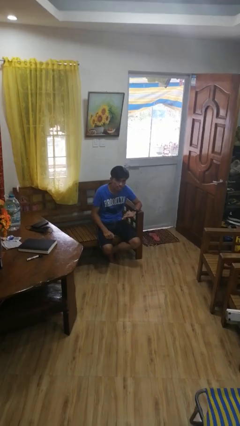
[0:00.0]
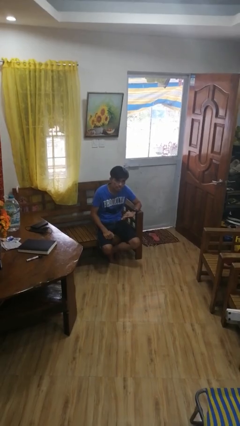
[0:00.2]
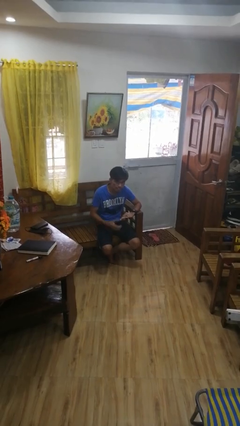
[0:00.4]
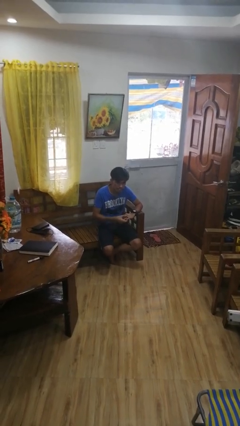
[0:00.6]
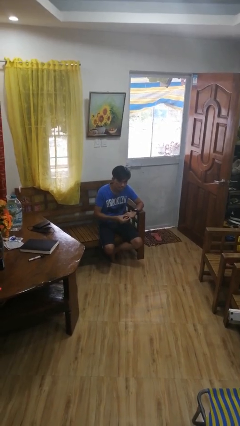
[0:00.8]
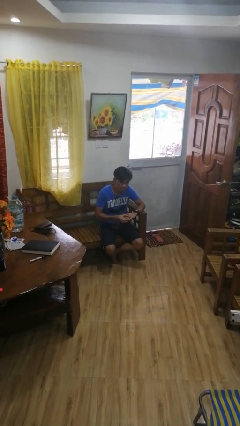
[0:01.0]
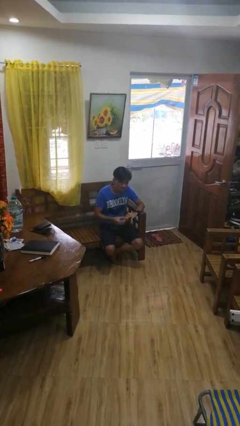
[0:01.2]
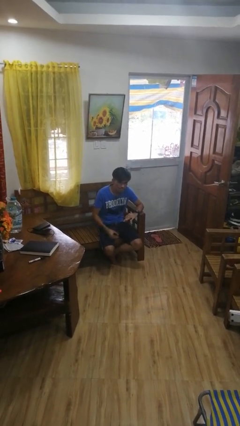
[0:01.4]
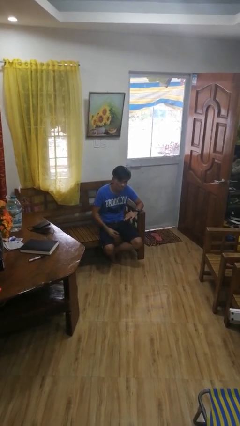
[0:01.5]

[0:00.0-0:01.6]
person takes off ring

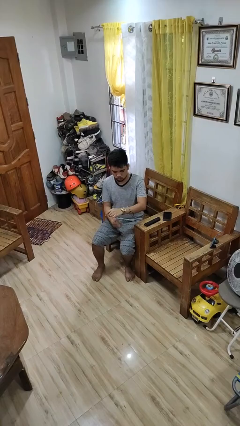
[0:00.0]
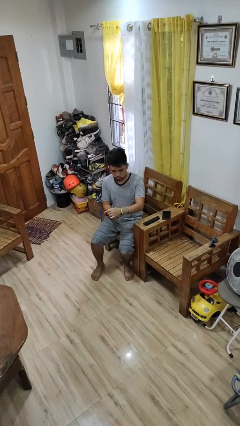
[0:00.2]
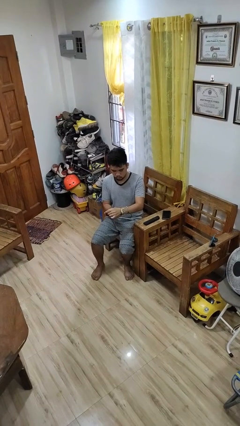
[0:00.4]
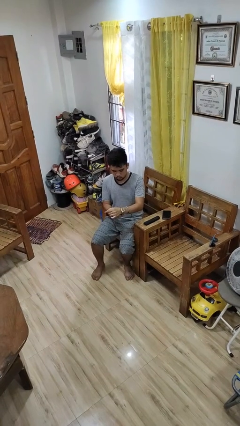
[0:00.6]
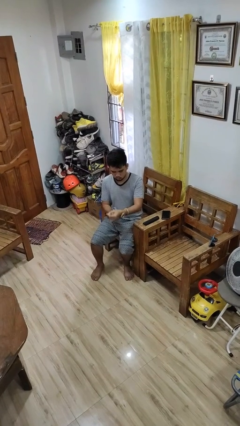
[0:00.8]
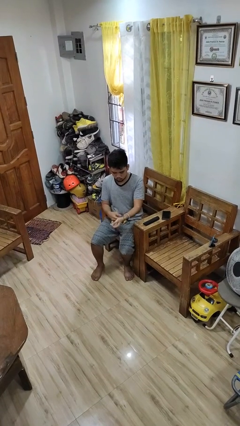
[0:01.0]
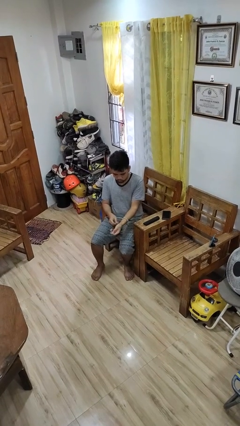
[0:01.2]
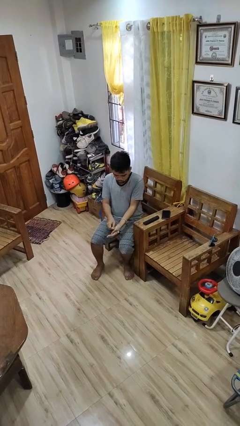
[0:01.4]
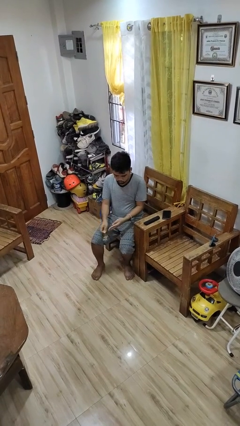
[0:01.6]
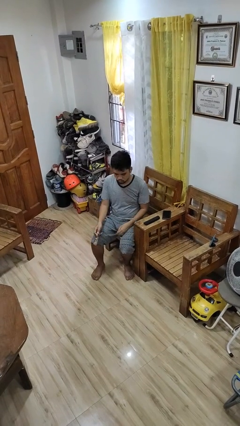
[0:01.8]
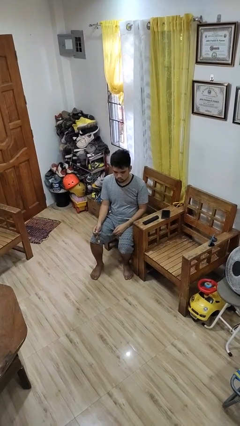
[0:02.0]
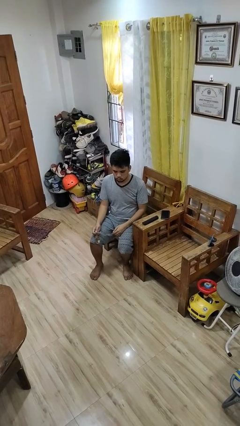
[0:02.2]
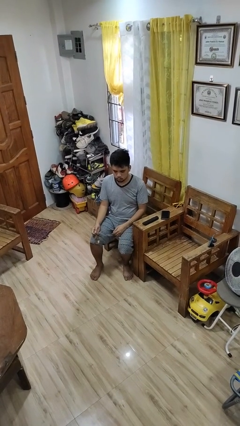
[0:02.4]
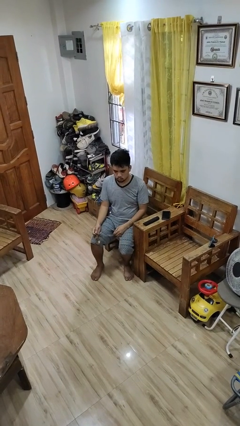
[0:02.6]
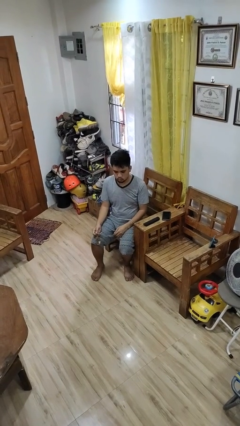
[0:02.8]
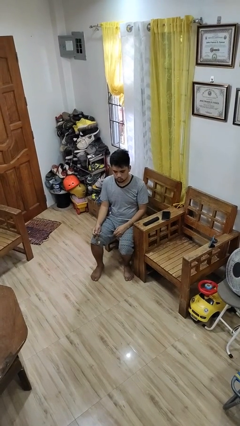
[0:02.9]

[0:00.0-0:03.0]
person takes off wristwatch

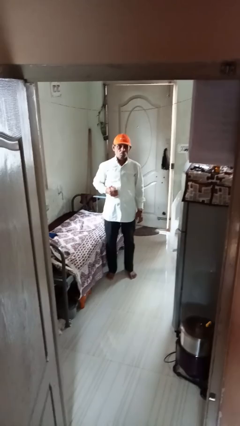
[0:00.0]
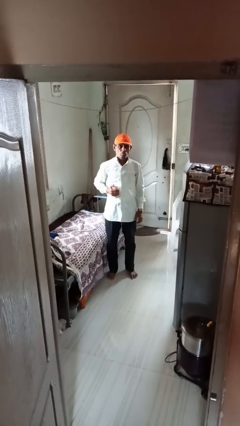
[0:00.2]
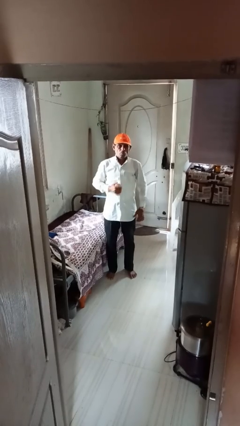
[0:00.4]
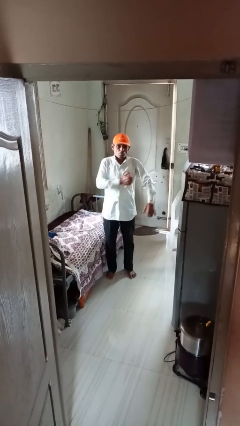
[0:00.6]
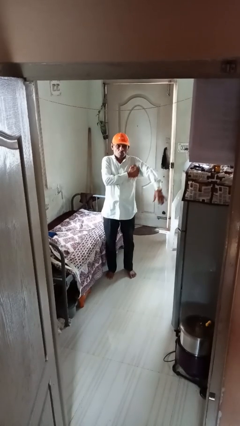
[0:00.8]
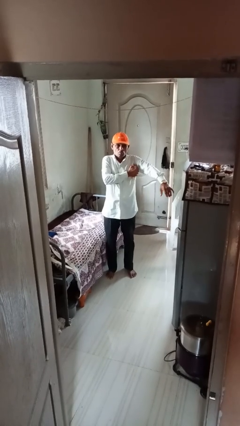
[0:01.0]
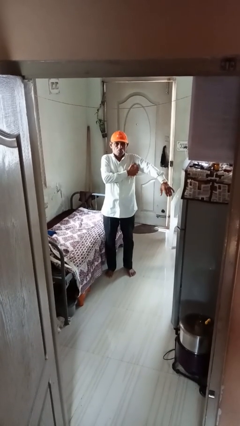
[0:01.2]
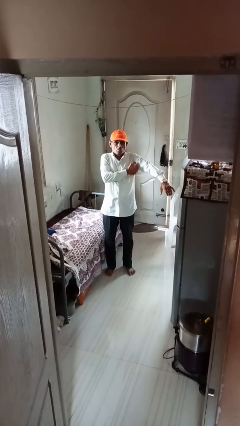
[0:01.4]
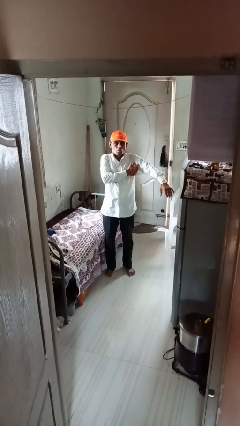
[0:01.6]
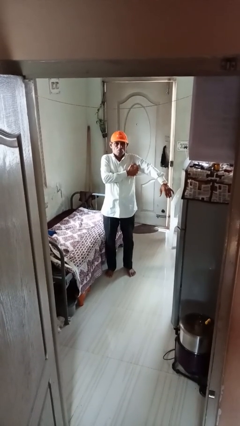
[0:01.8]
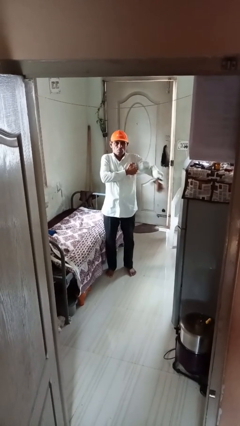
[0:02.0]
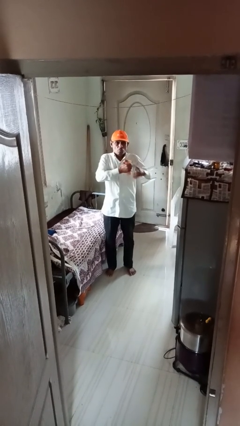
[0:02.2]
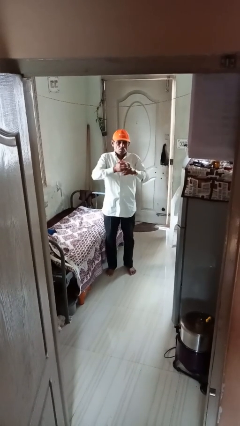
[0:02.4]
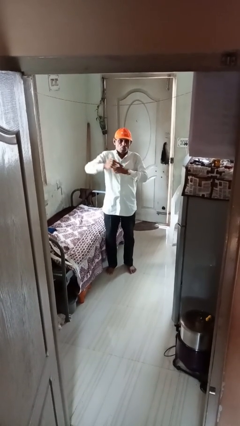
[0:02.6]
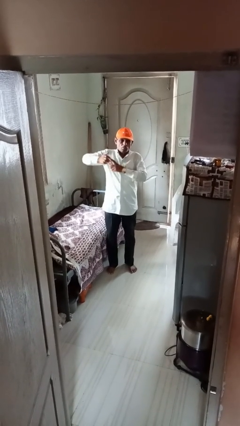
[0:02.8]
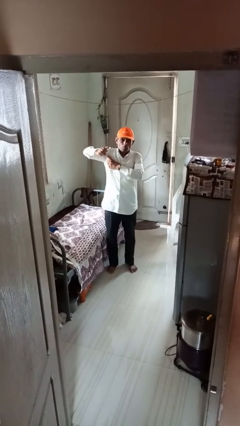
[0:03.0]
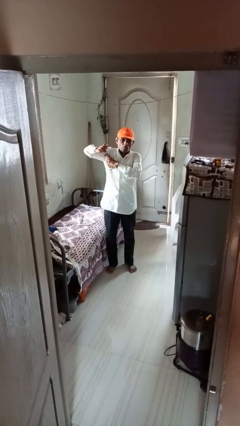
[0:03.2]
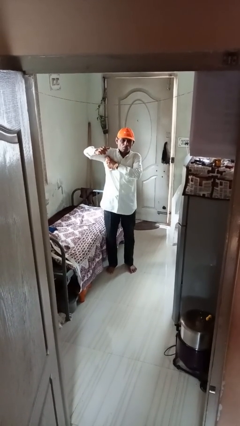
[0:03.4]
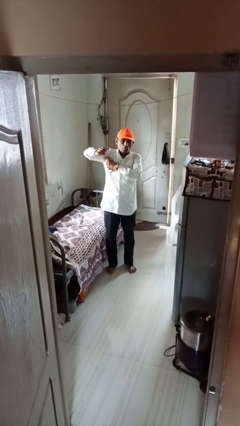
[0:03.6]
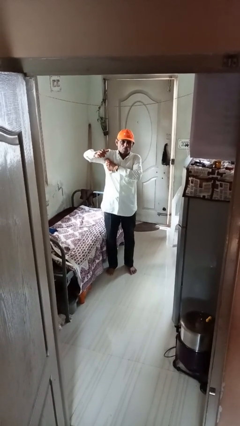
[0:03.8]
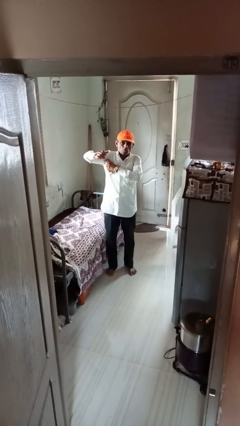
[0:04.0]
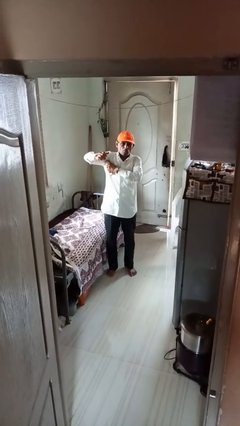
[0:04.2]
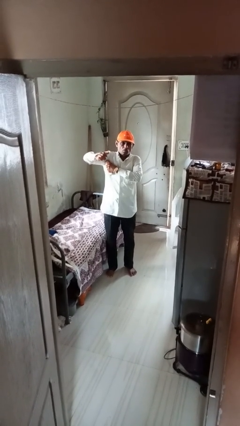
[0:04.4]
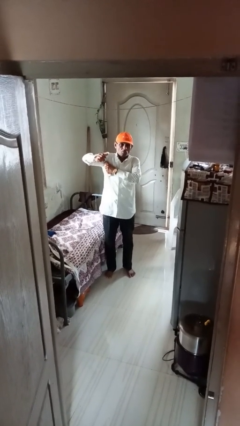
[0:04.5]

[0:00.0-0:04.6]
person applies deodorant

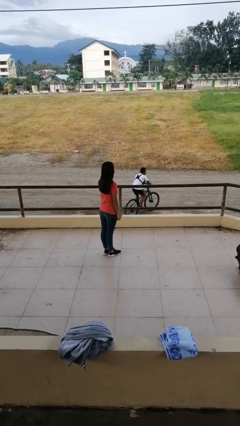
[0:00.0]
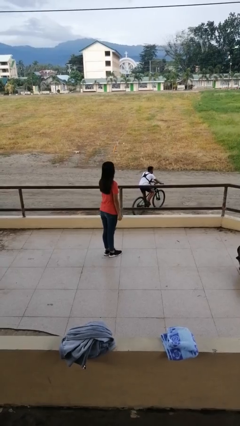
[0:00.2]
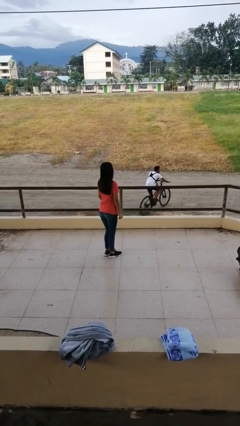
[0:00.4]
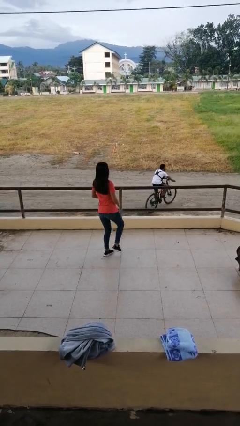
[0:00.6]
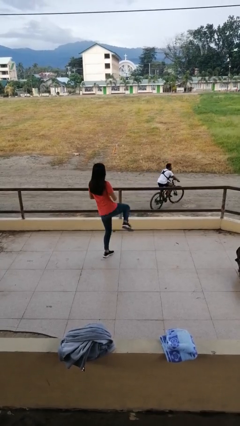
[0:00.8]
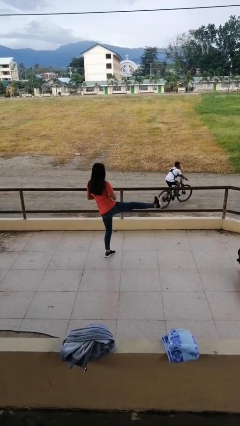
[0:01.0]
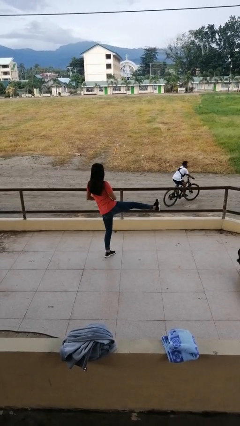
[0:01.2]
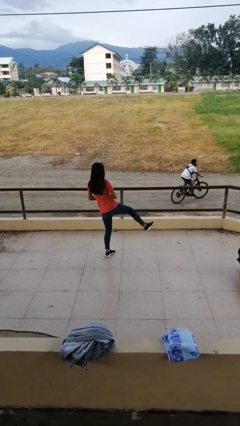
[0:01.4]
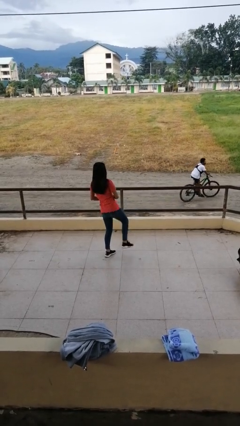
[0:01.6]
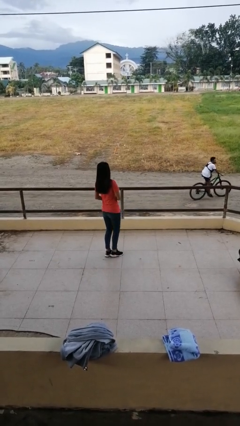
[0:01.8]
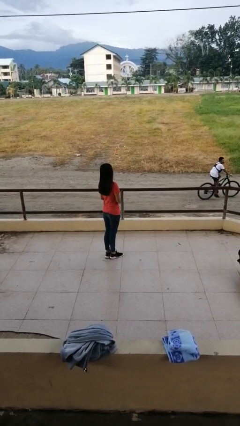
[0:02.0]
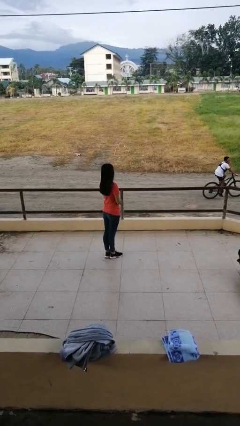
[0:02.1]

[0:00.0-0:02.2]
person karate kicks

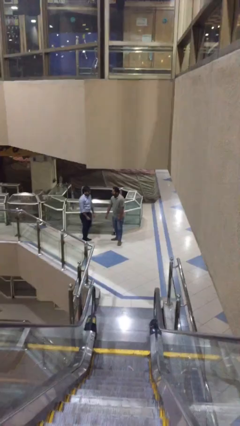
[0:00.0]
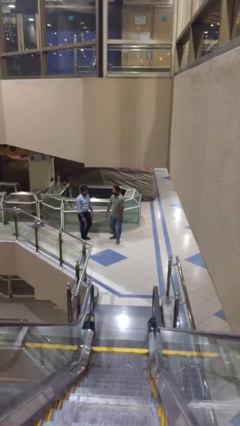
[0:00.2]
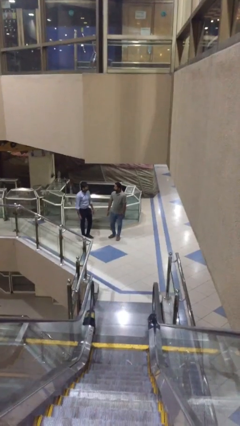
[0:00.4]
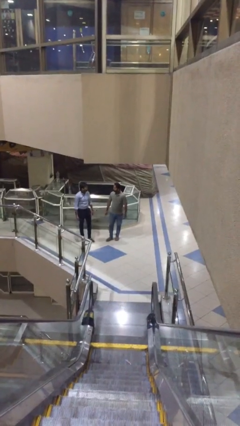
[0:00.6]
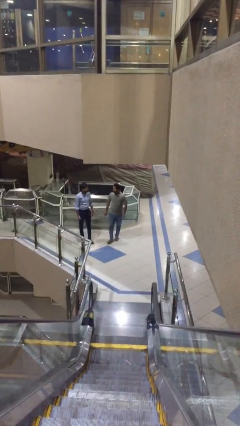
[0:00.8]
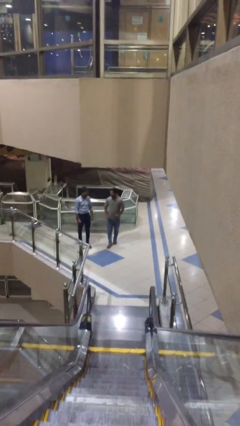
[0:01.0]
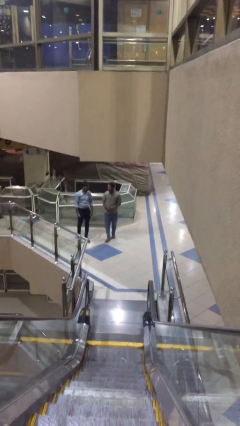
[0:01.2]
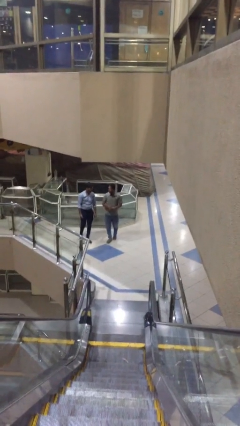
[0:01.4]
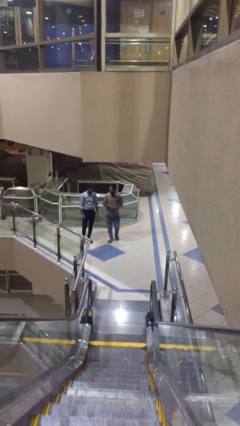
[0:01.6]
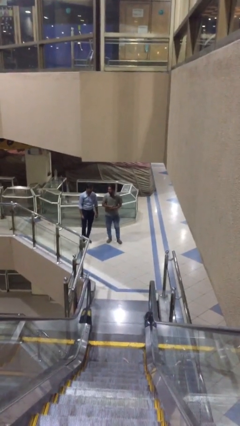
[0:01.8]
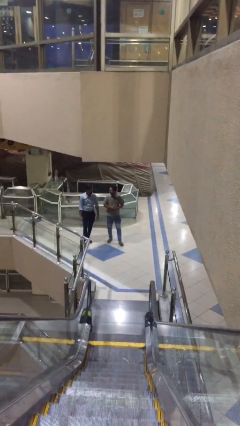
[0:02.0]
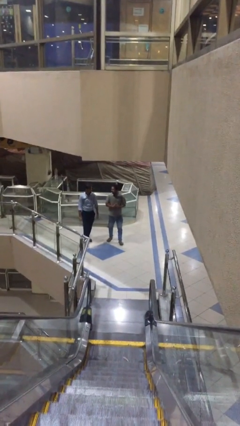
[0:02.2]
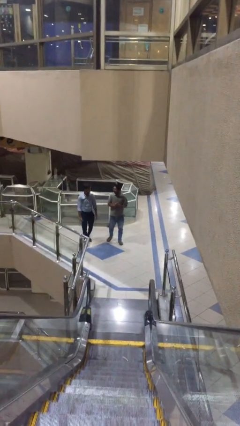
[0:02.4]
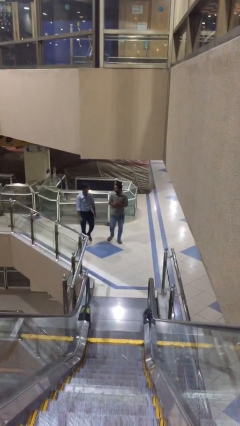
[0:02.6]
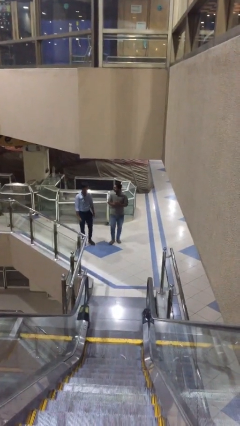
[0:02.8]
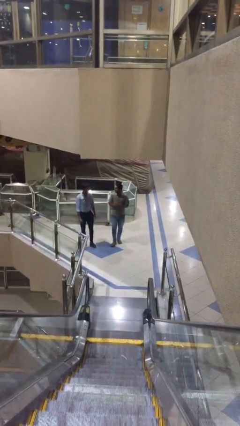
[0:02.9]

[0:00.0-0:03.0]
person talks to person

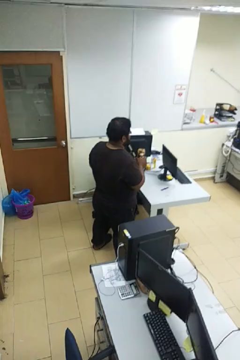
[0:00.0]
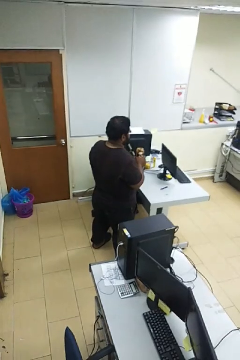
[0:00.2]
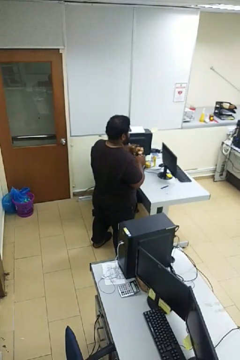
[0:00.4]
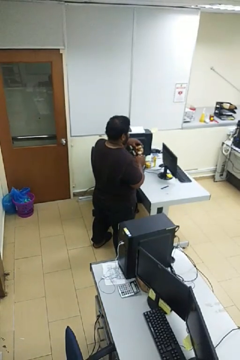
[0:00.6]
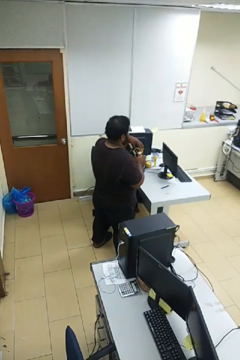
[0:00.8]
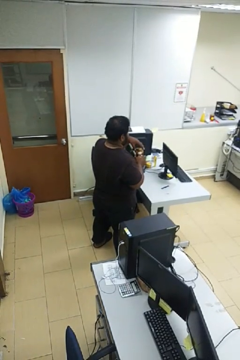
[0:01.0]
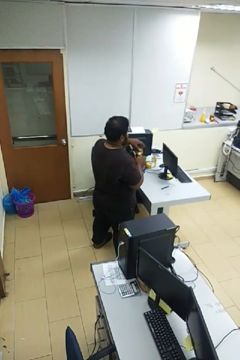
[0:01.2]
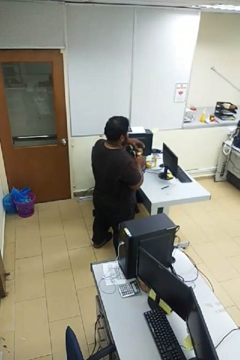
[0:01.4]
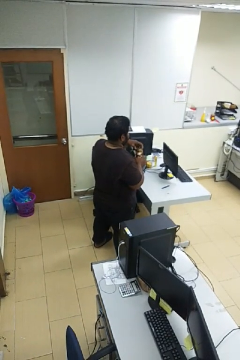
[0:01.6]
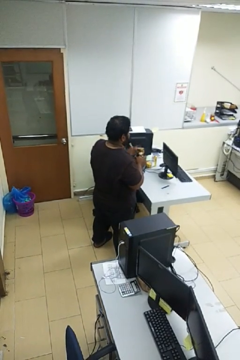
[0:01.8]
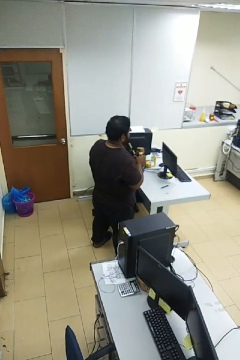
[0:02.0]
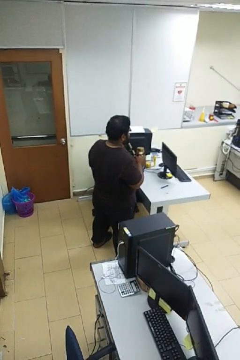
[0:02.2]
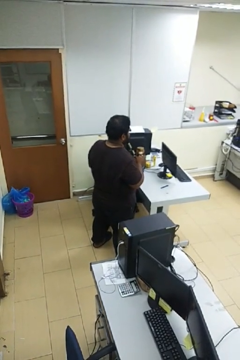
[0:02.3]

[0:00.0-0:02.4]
person closes jar

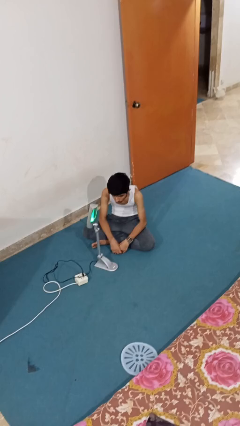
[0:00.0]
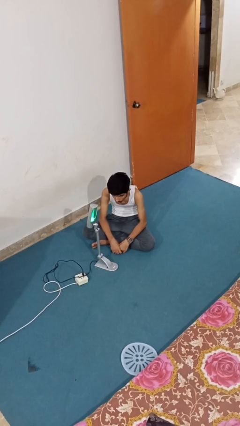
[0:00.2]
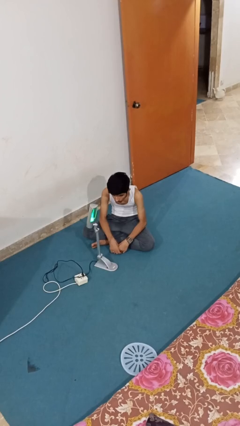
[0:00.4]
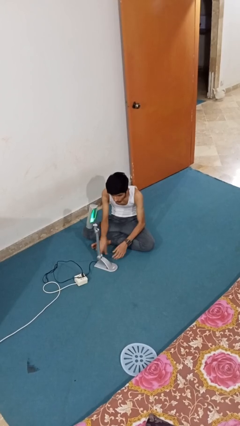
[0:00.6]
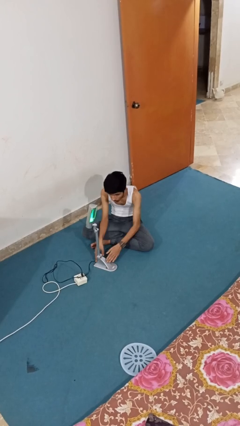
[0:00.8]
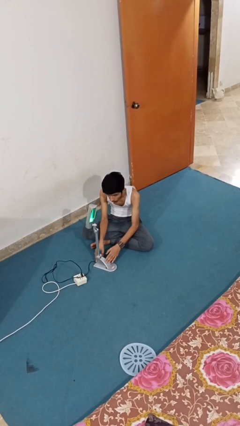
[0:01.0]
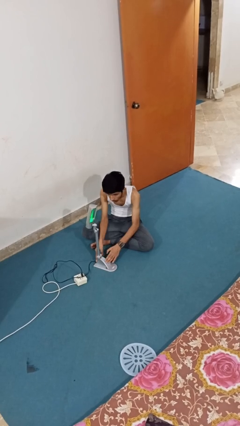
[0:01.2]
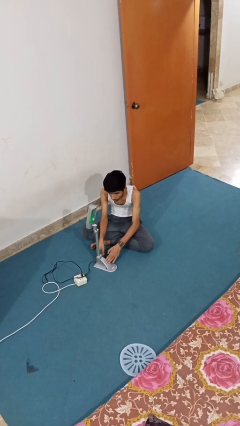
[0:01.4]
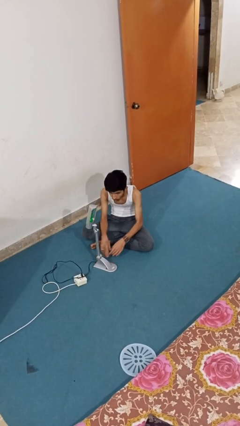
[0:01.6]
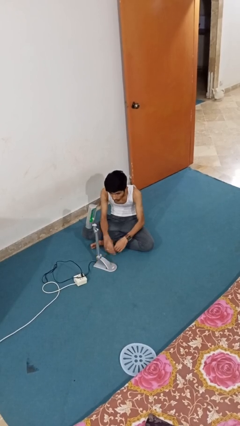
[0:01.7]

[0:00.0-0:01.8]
person turns off lamp
